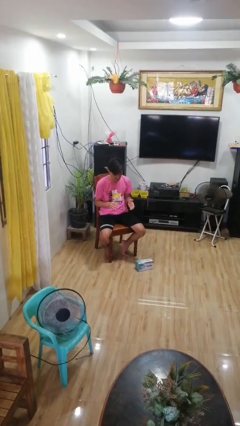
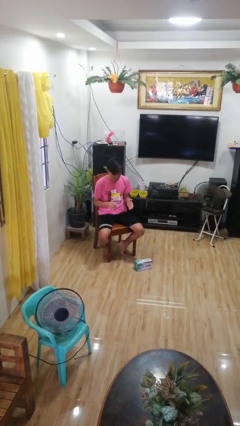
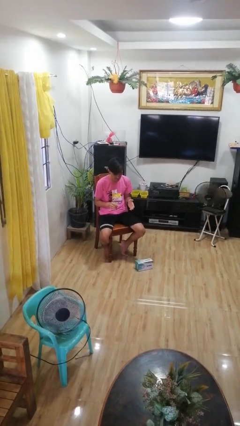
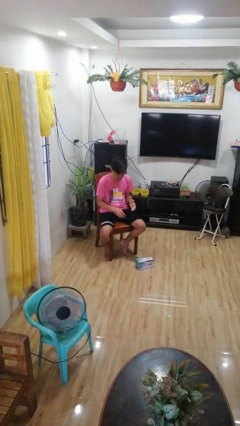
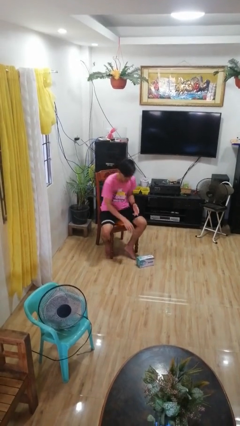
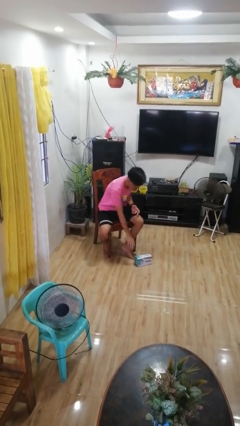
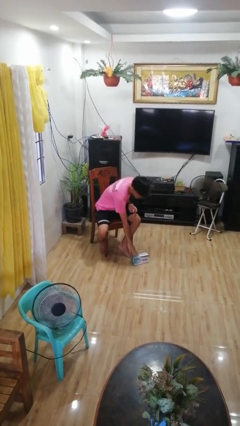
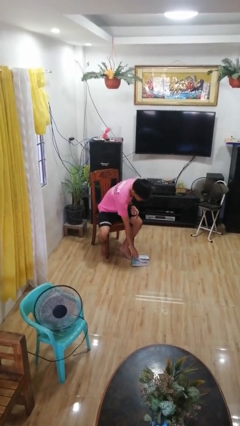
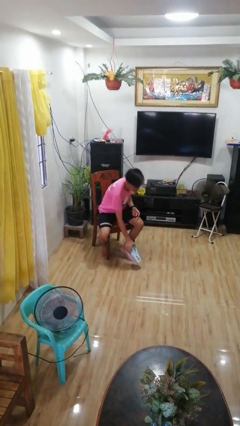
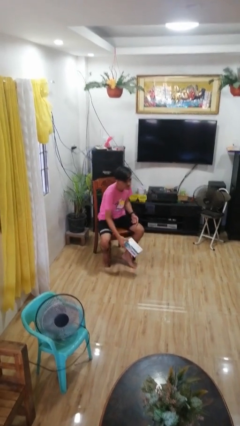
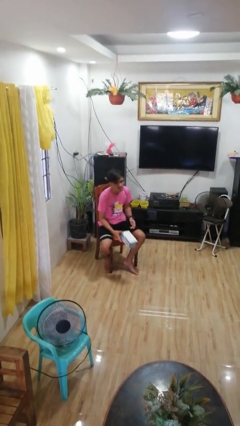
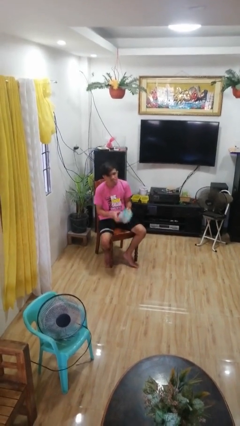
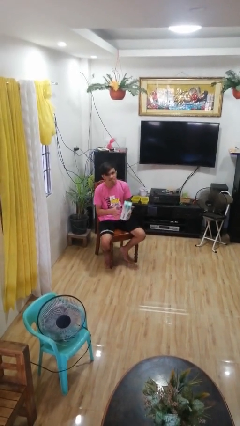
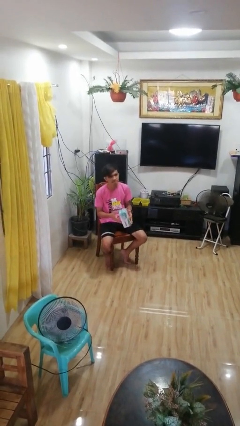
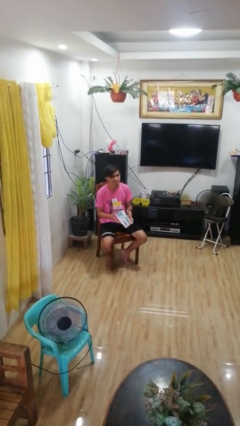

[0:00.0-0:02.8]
person picks up object from floor

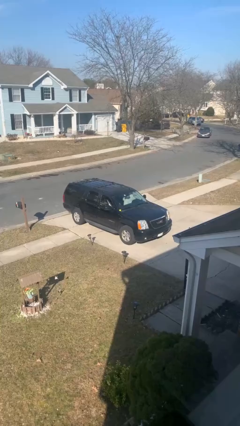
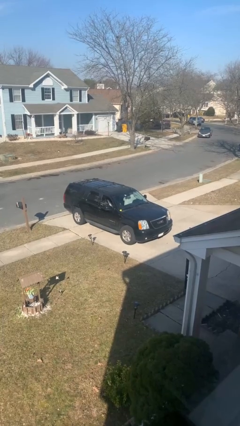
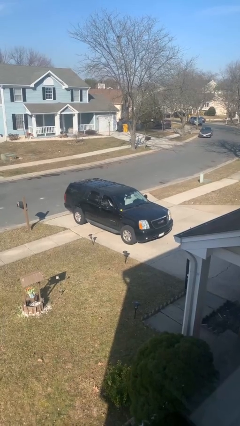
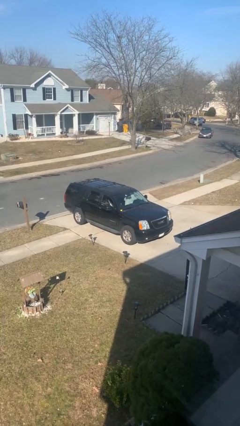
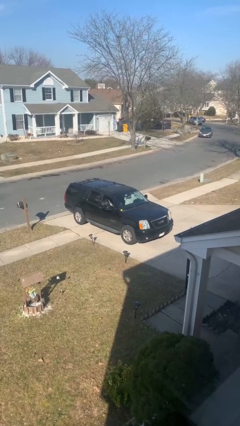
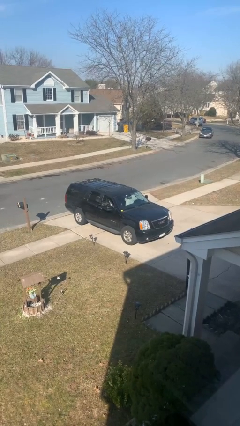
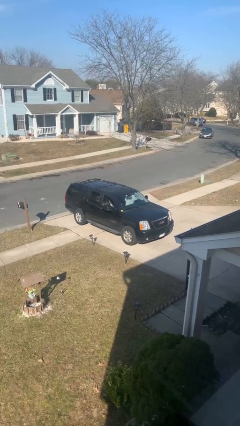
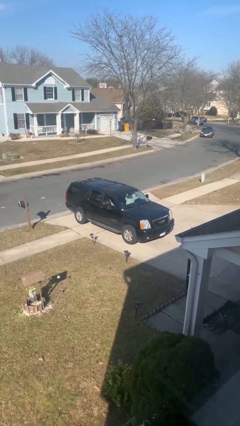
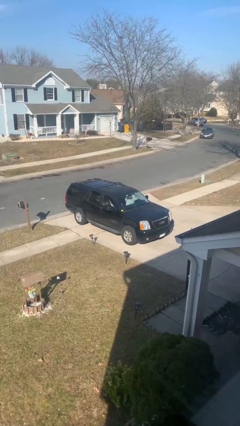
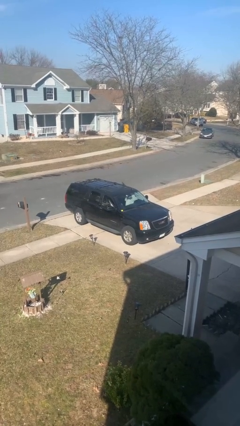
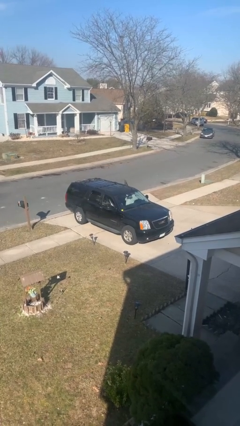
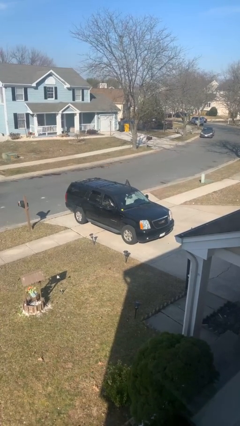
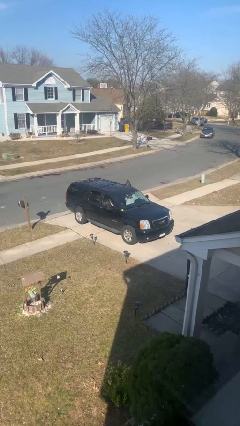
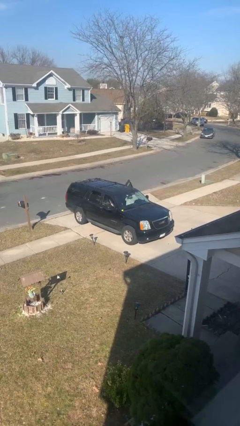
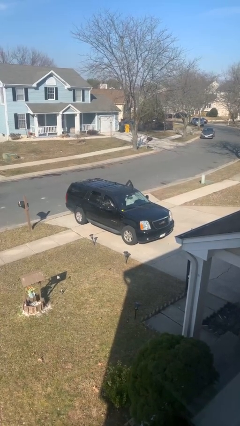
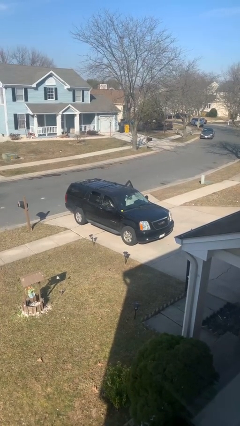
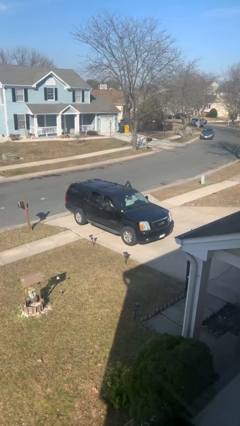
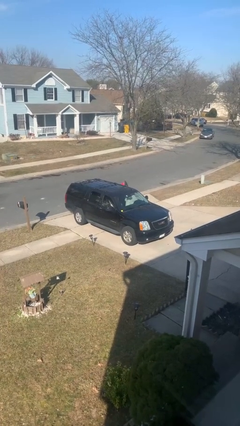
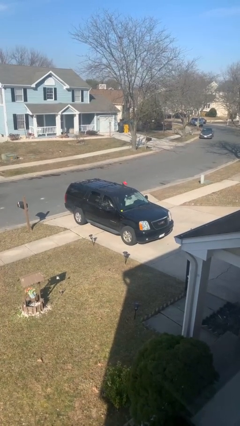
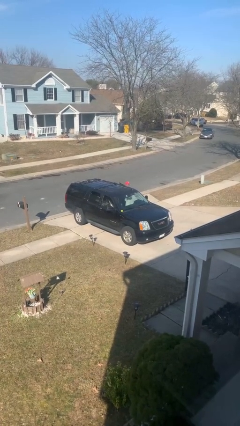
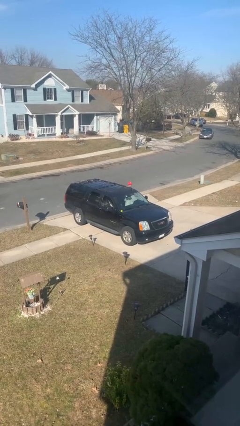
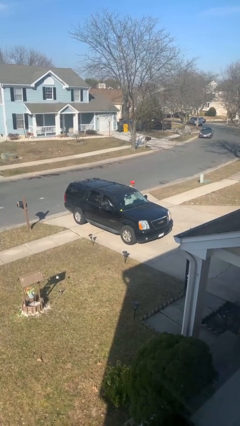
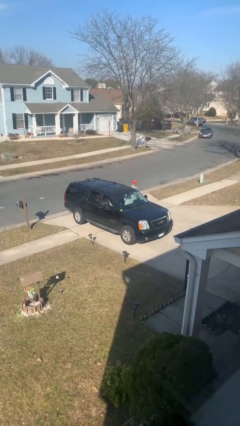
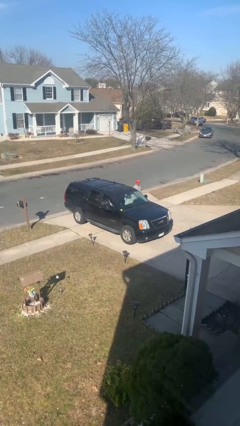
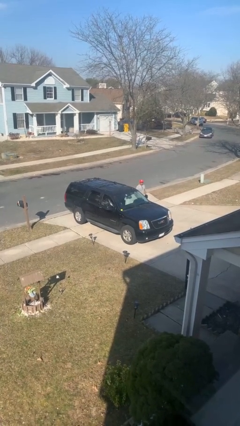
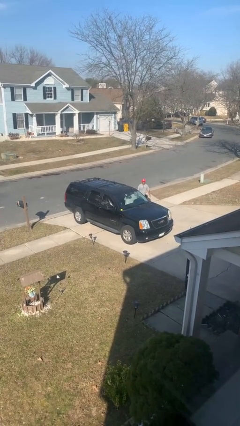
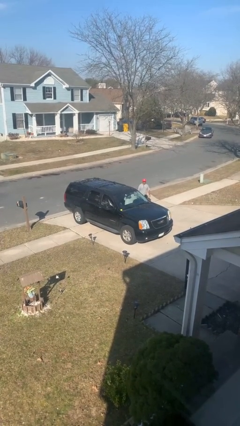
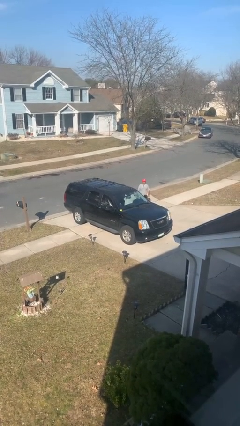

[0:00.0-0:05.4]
car drops off person

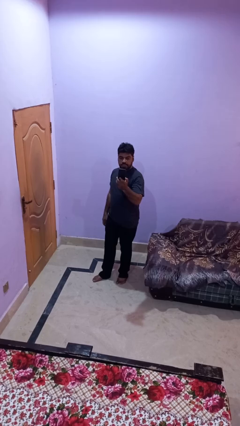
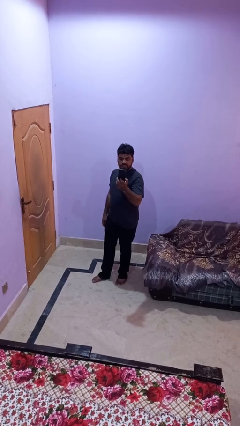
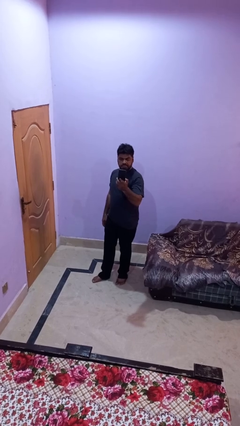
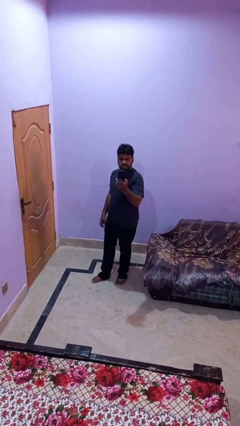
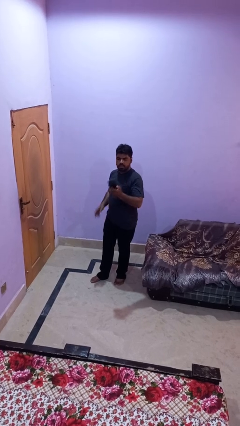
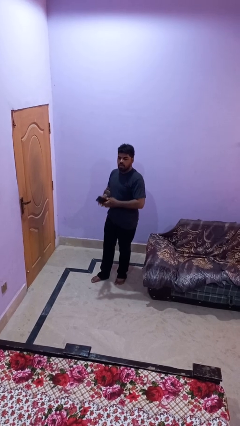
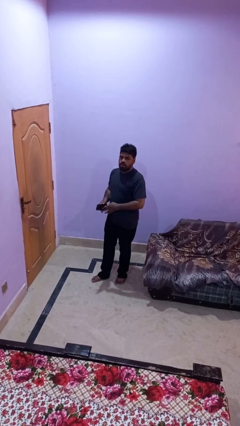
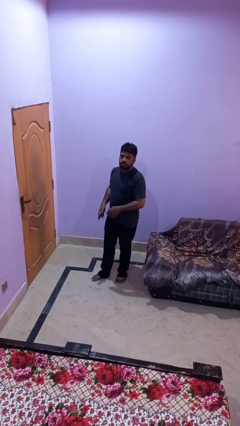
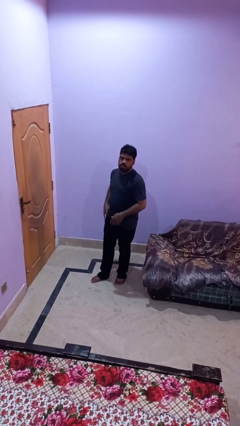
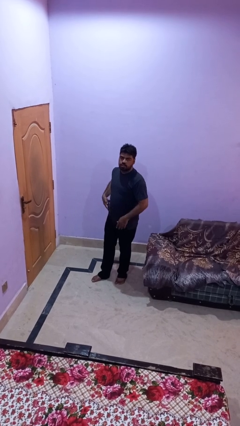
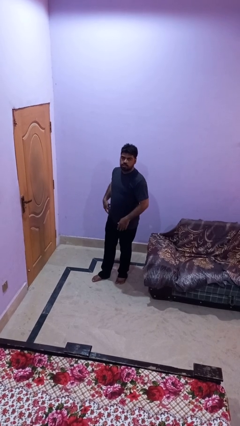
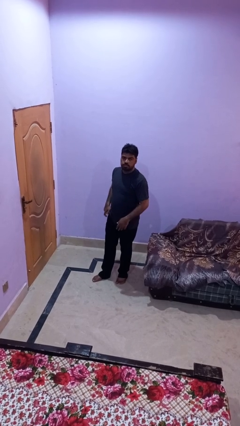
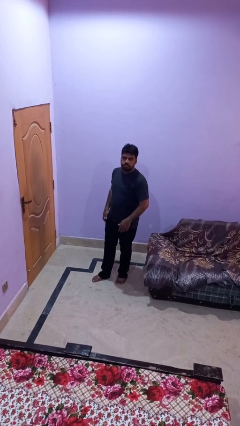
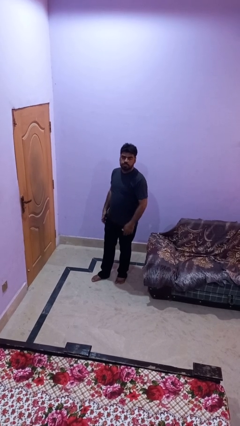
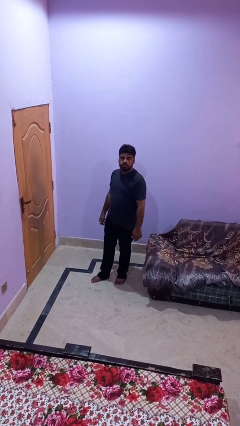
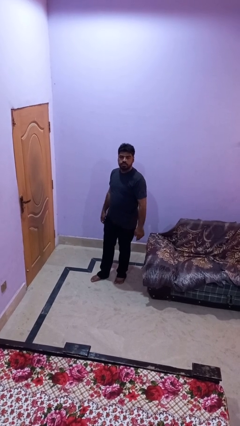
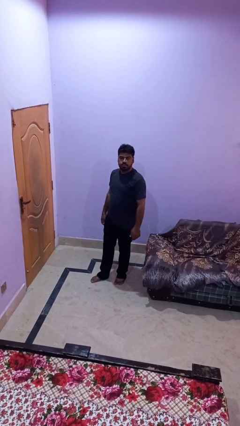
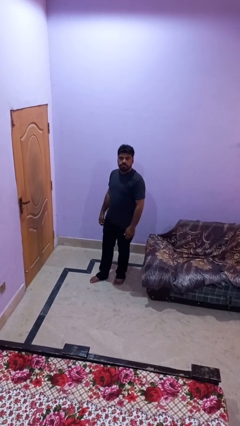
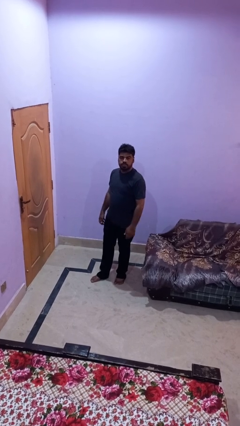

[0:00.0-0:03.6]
person puts phone into pocket

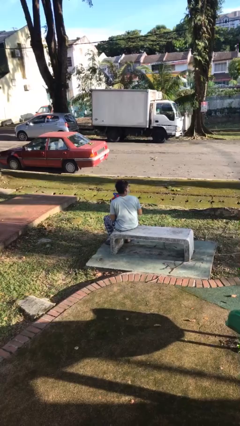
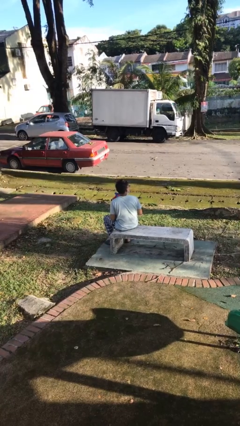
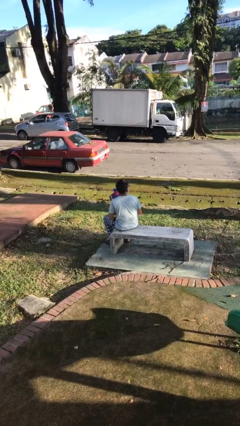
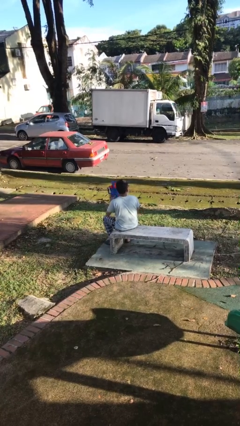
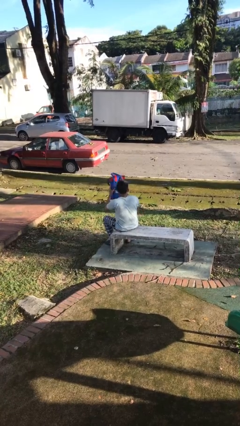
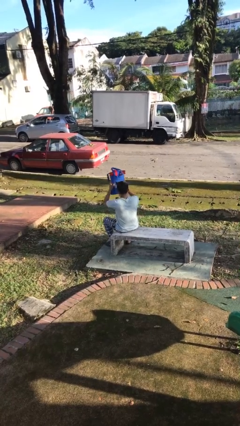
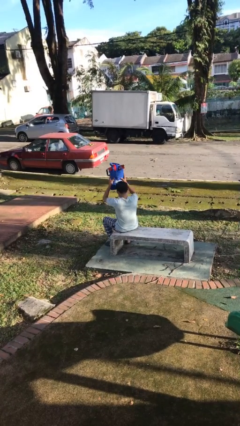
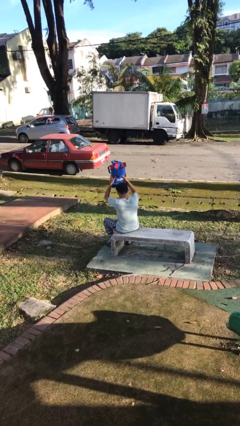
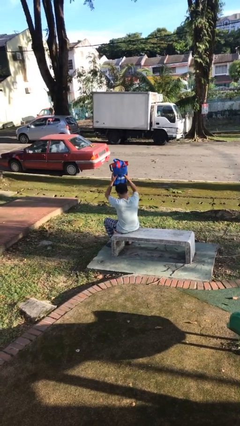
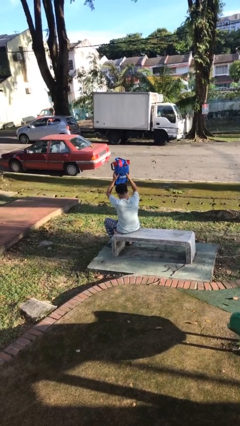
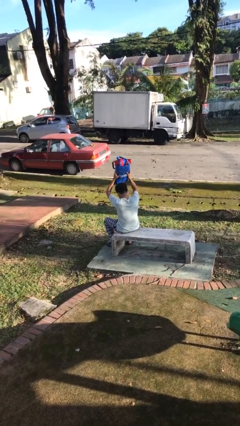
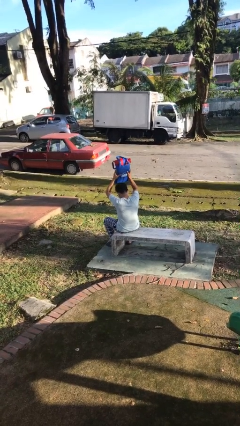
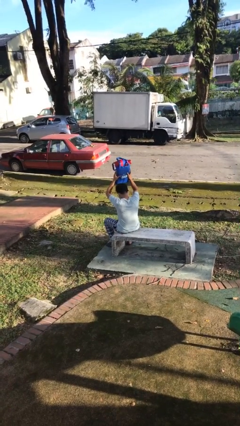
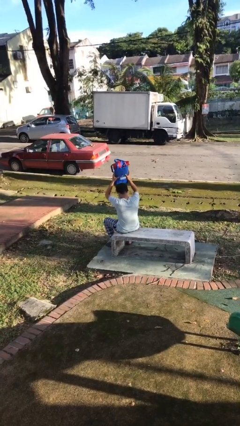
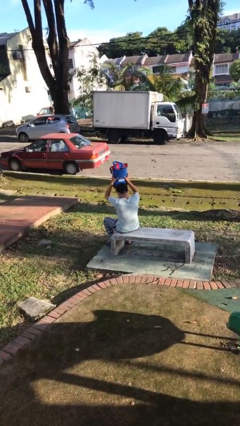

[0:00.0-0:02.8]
person holds object above head

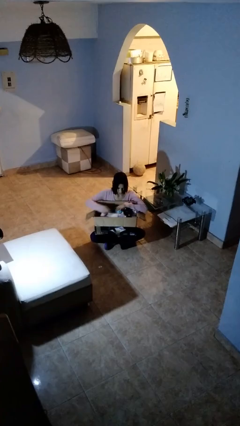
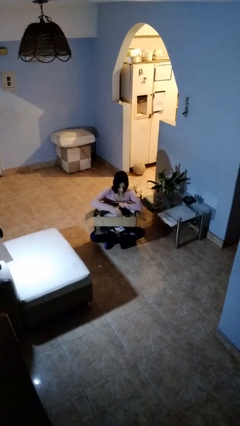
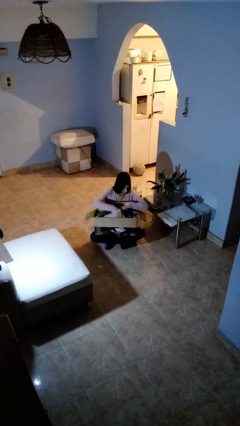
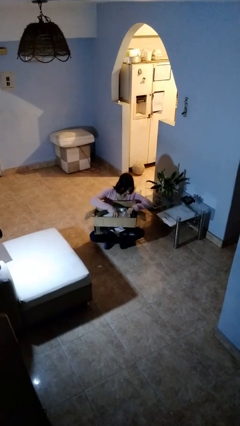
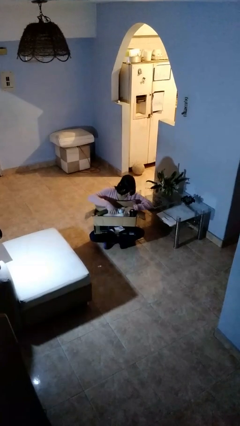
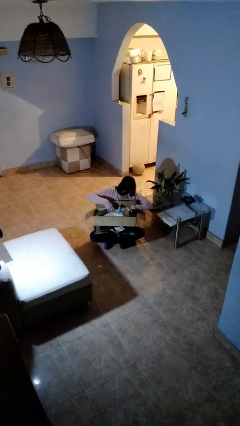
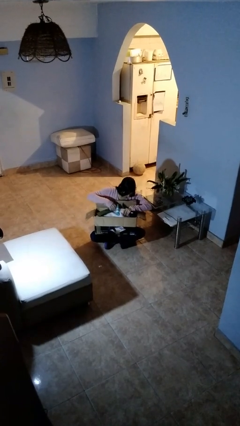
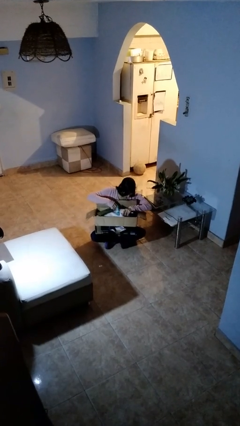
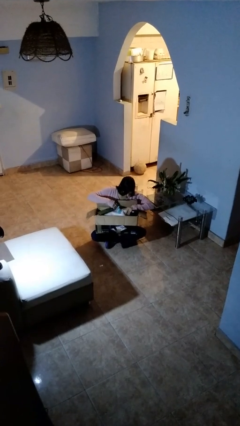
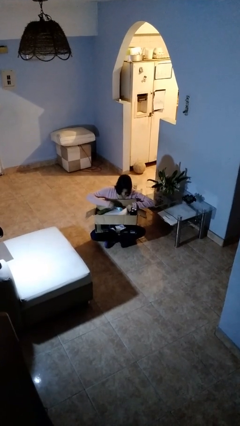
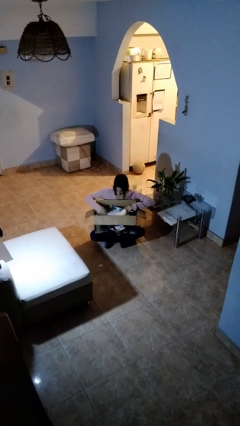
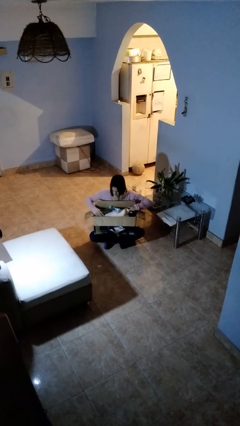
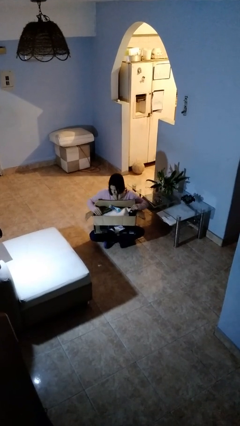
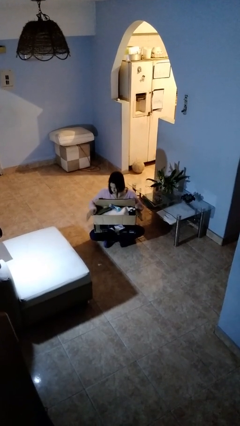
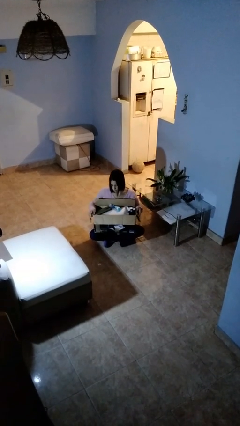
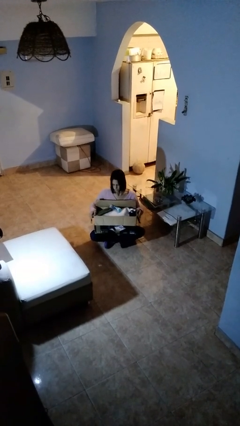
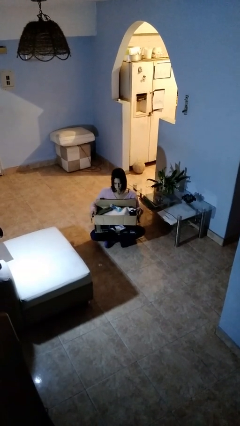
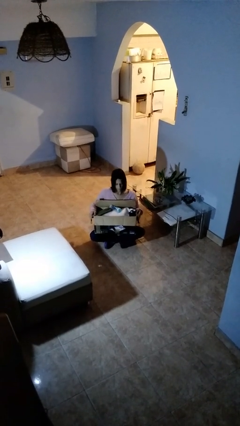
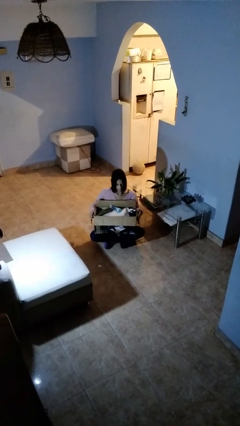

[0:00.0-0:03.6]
person searches in box
